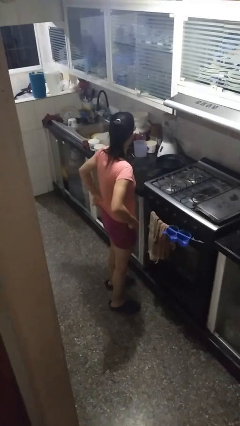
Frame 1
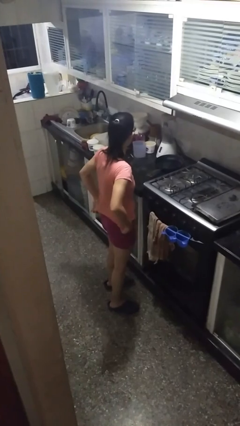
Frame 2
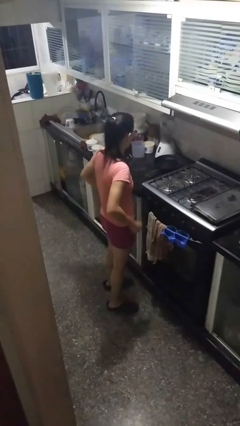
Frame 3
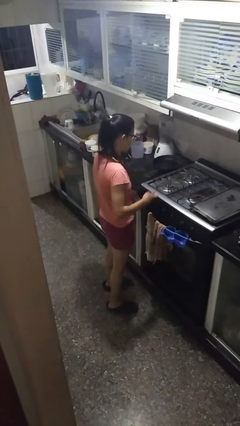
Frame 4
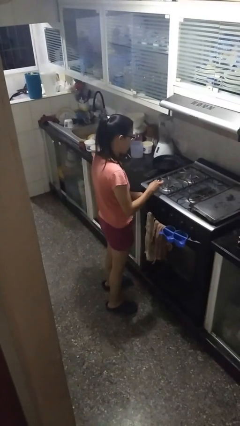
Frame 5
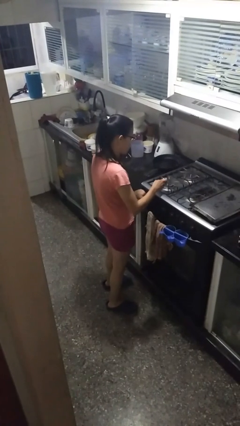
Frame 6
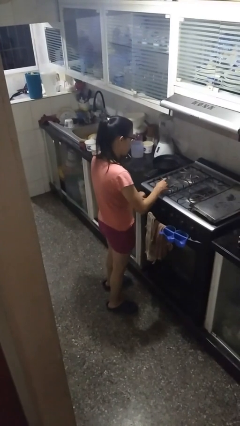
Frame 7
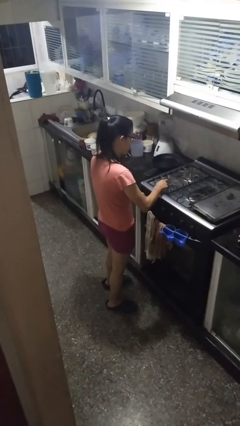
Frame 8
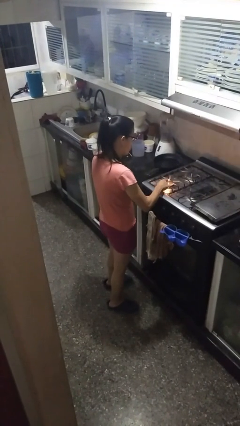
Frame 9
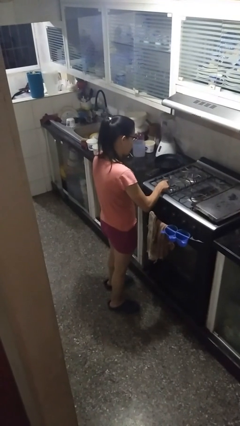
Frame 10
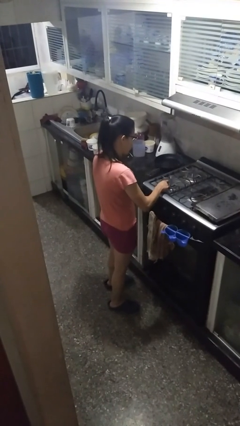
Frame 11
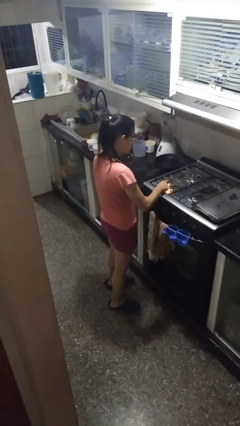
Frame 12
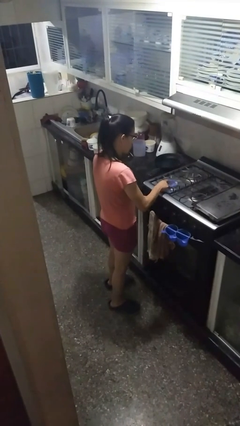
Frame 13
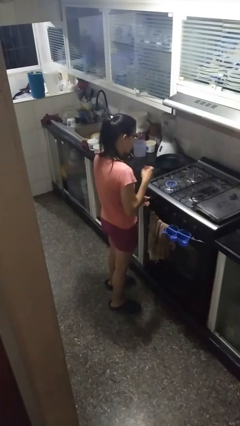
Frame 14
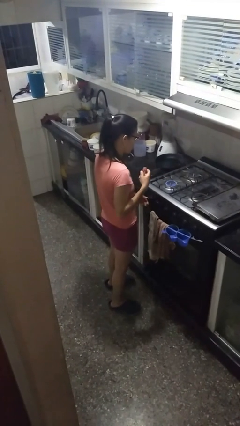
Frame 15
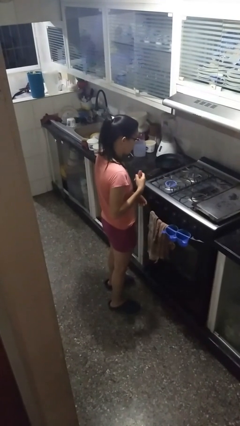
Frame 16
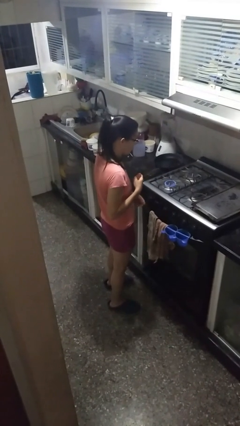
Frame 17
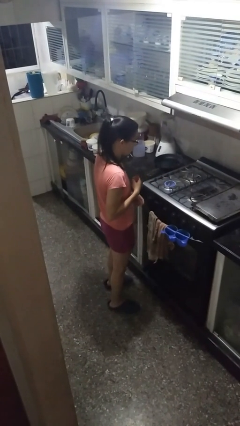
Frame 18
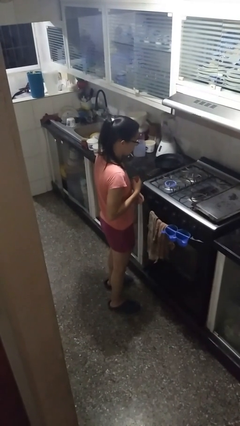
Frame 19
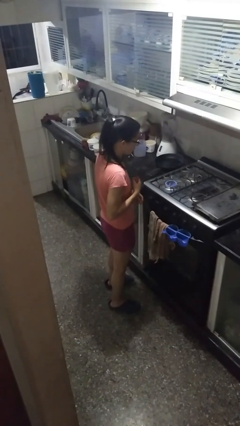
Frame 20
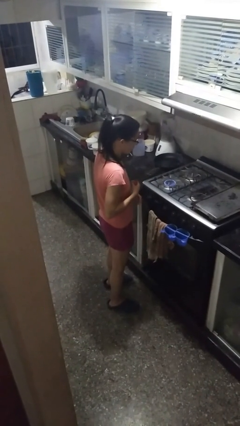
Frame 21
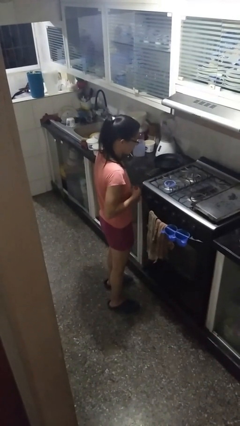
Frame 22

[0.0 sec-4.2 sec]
person turns on stovetop

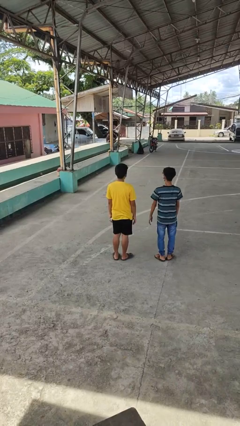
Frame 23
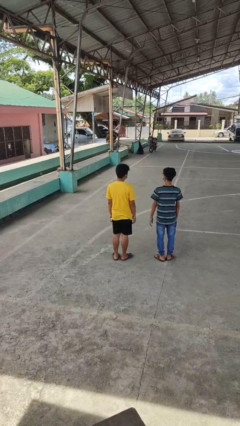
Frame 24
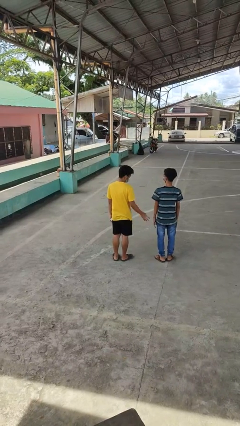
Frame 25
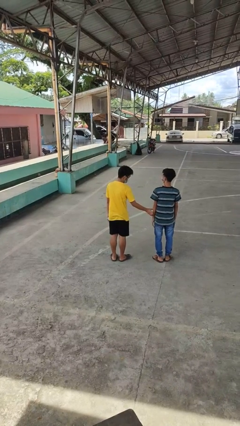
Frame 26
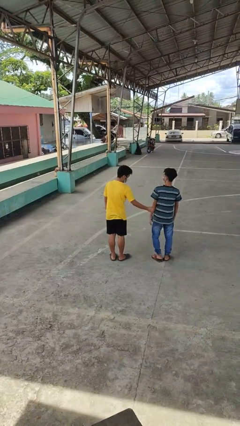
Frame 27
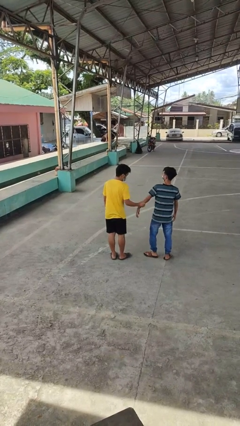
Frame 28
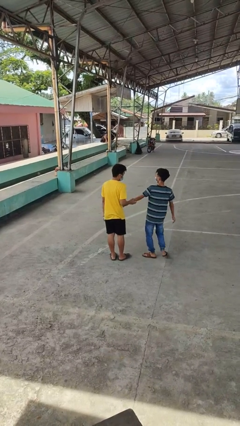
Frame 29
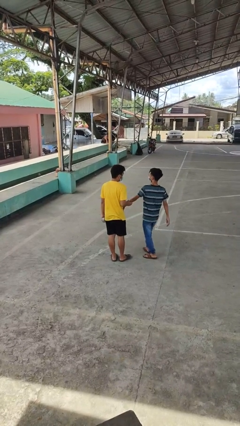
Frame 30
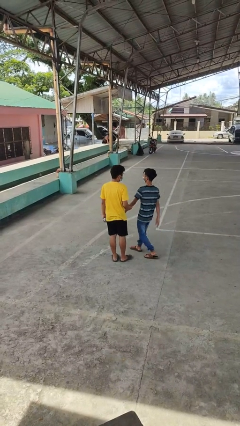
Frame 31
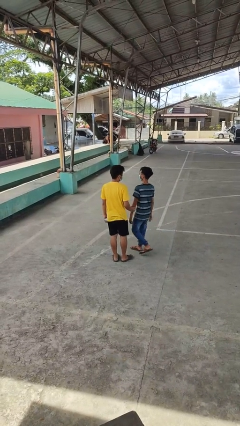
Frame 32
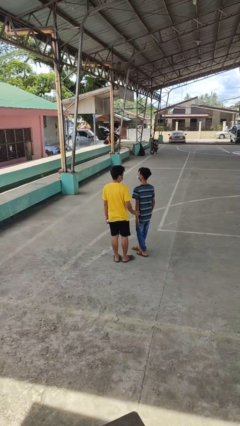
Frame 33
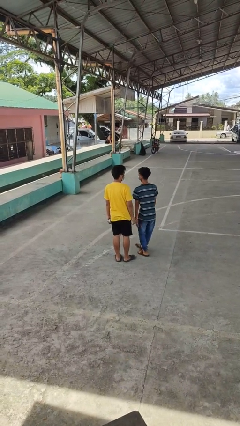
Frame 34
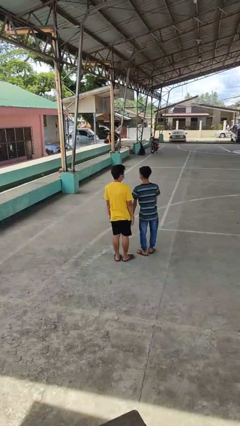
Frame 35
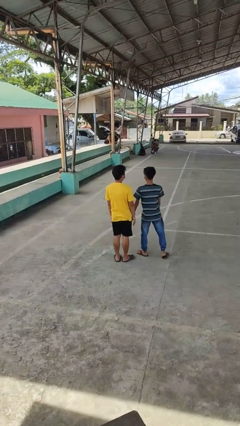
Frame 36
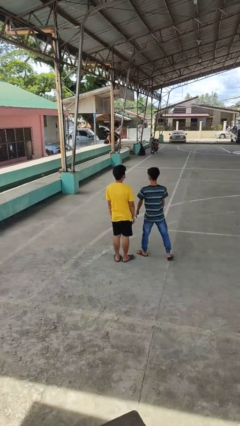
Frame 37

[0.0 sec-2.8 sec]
person grabs person by forearm

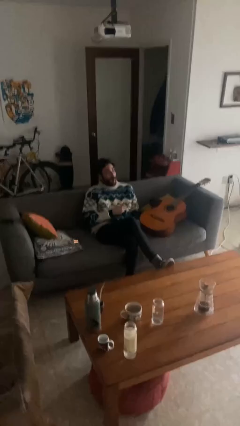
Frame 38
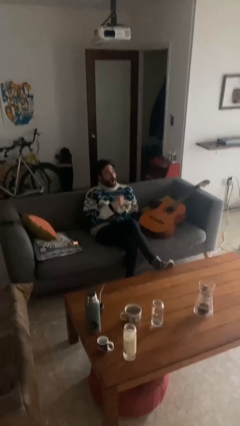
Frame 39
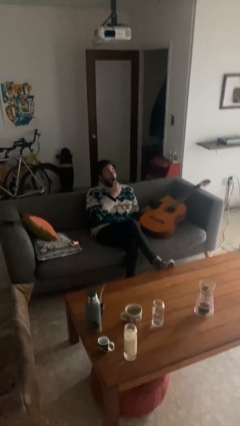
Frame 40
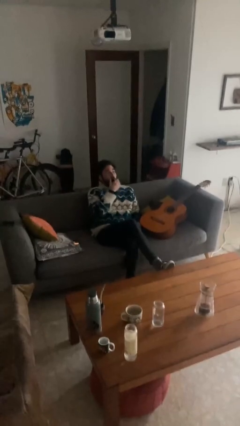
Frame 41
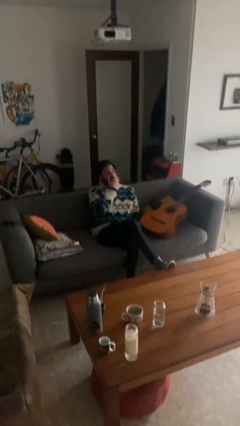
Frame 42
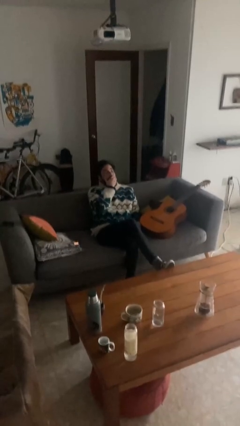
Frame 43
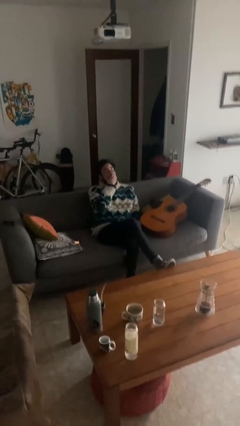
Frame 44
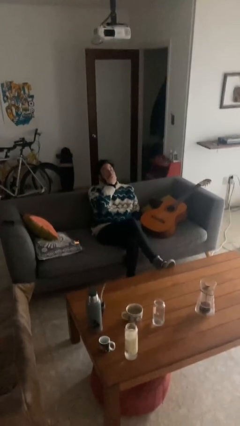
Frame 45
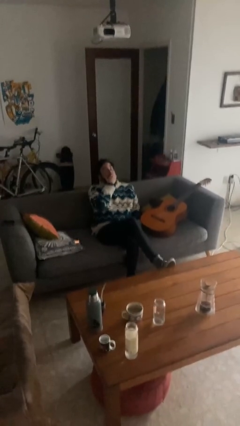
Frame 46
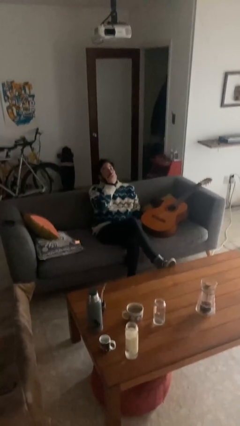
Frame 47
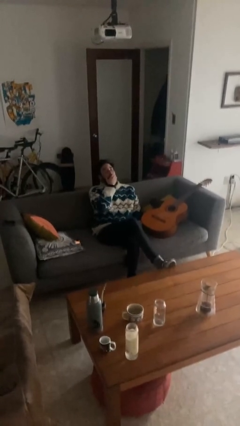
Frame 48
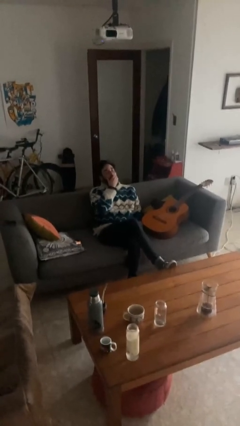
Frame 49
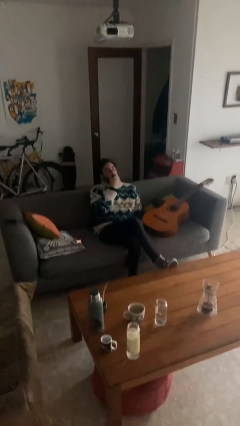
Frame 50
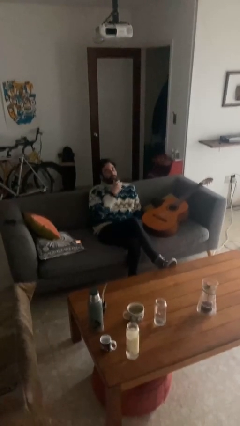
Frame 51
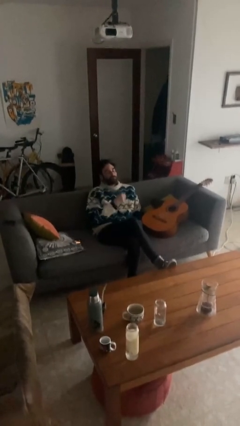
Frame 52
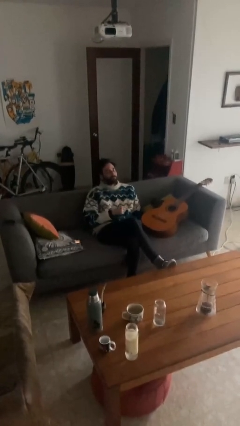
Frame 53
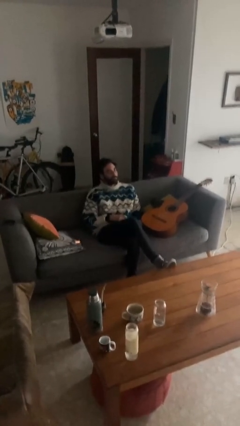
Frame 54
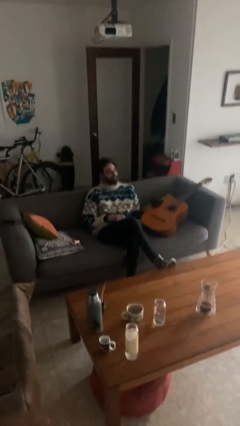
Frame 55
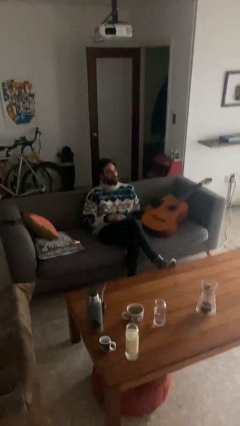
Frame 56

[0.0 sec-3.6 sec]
person yawns

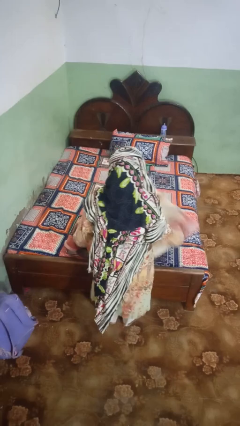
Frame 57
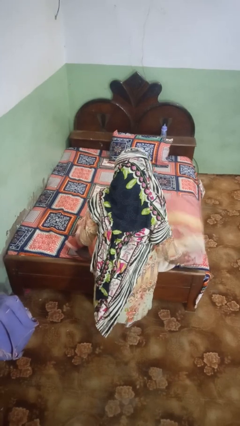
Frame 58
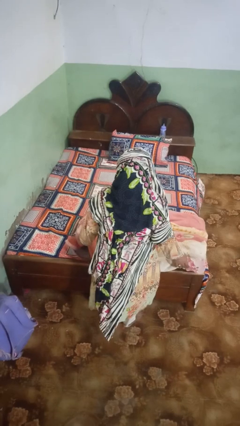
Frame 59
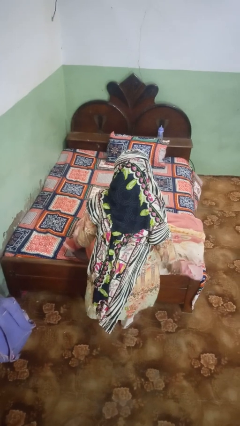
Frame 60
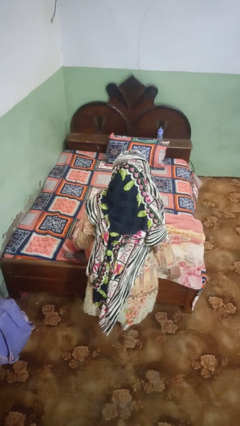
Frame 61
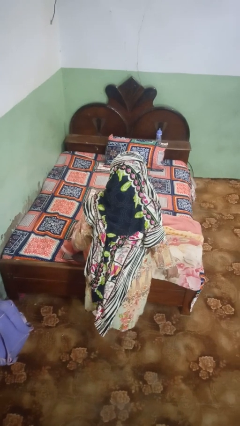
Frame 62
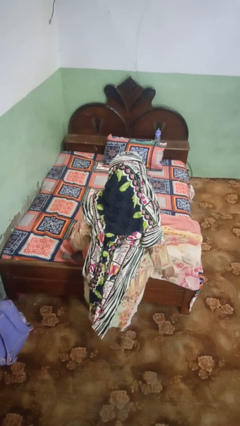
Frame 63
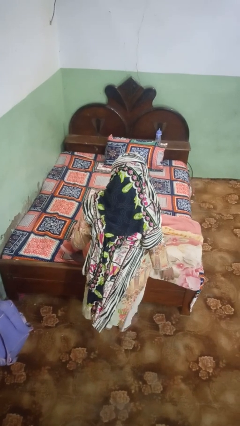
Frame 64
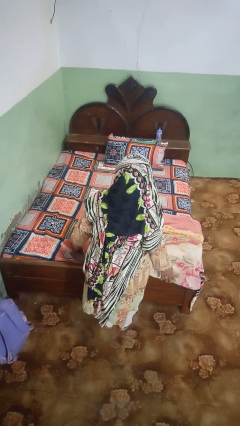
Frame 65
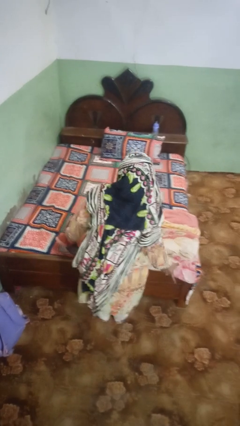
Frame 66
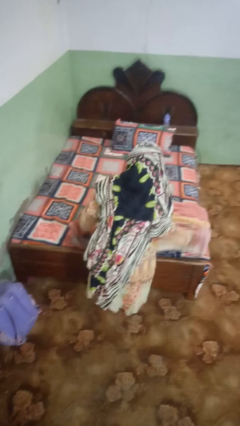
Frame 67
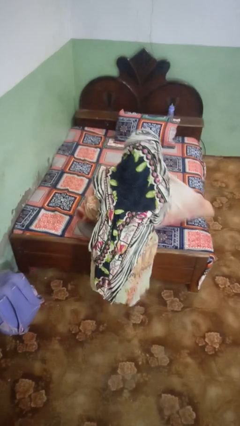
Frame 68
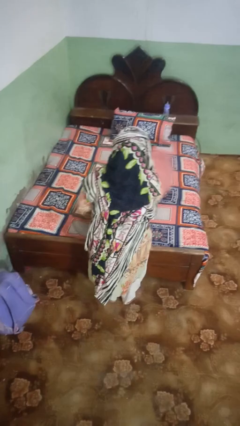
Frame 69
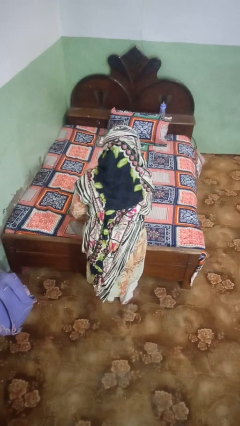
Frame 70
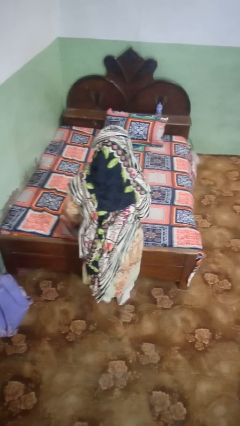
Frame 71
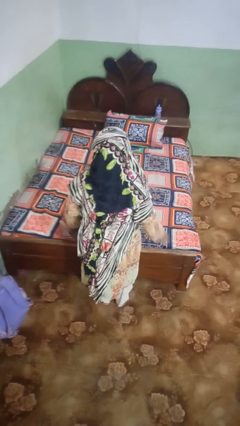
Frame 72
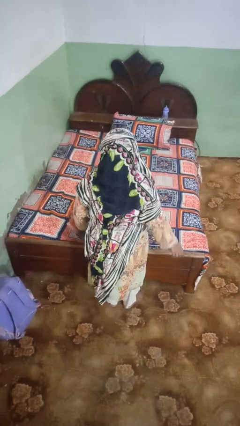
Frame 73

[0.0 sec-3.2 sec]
person folds blanket

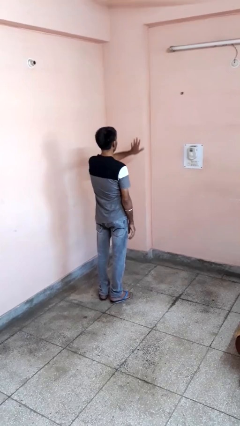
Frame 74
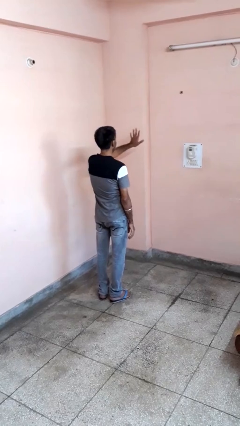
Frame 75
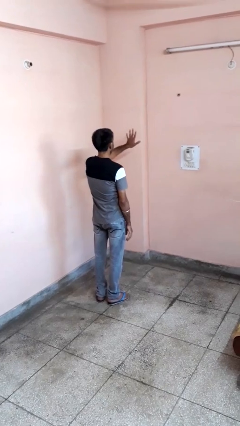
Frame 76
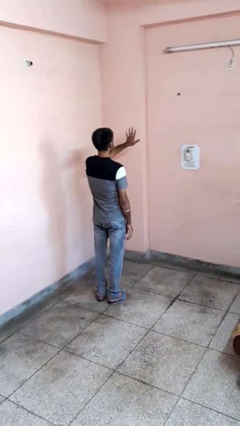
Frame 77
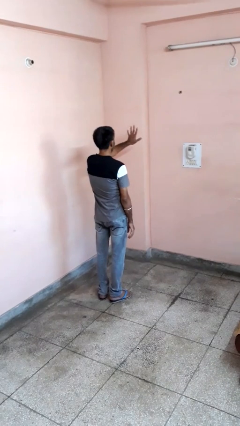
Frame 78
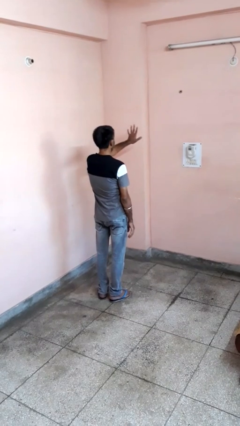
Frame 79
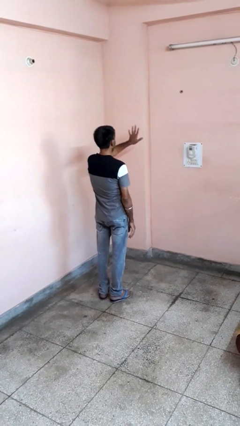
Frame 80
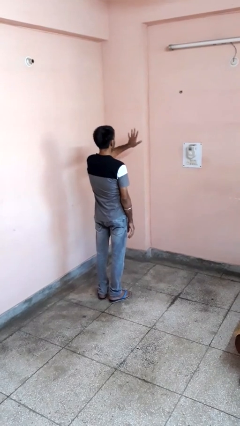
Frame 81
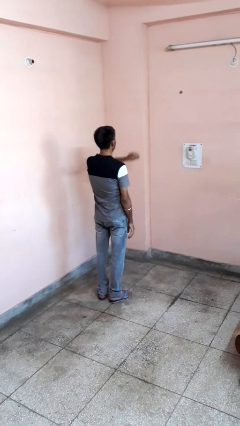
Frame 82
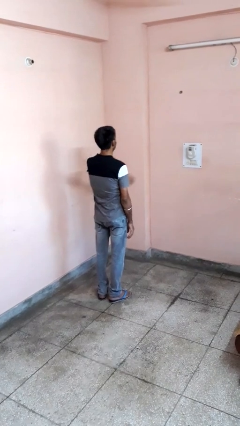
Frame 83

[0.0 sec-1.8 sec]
person gestures number five

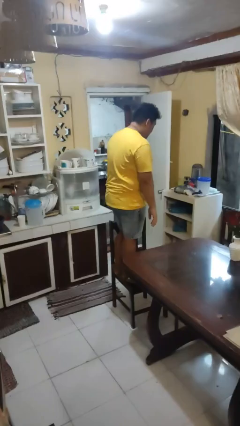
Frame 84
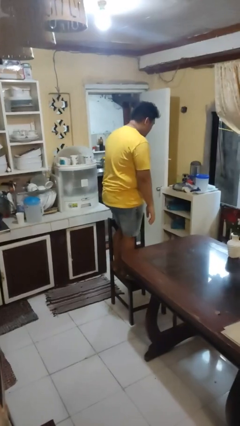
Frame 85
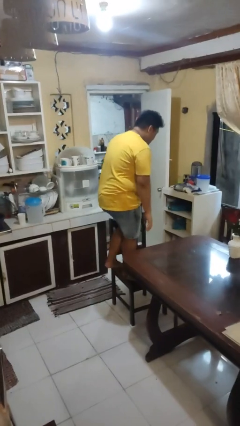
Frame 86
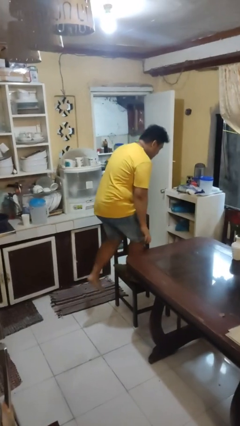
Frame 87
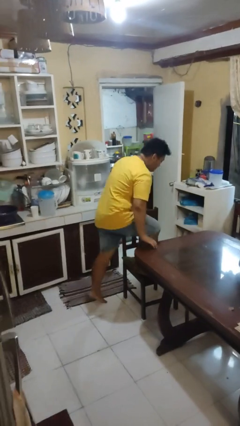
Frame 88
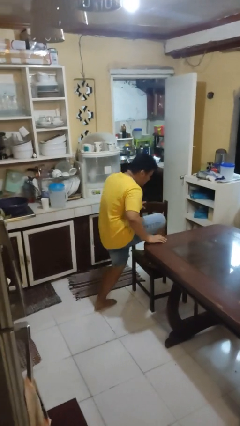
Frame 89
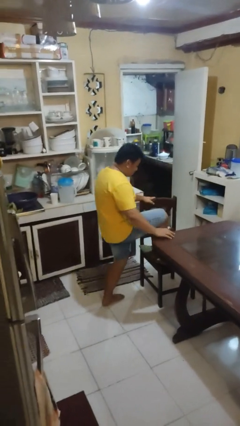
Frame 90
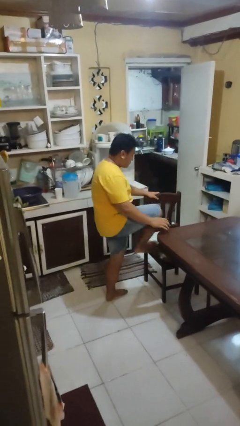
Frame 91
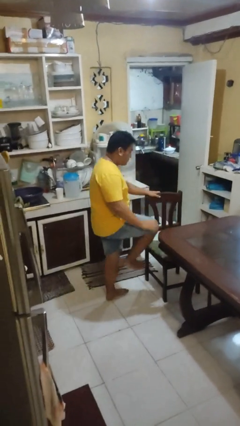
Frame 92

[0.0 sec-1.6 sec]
person climbs off chair

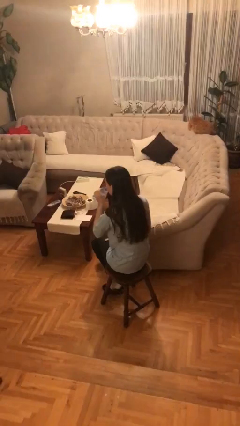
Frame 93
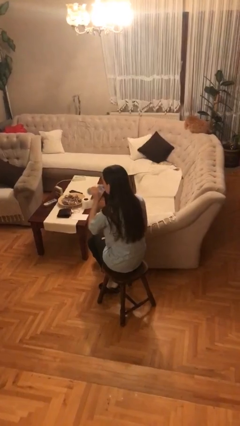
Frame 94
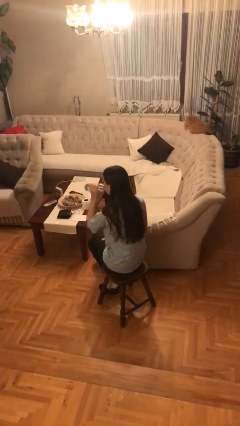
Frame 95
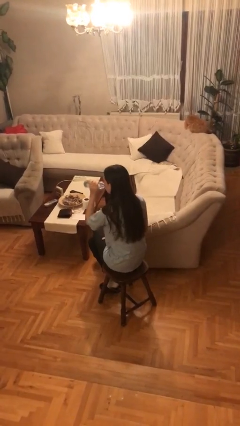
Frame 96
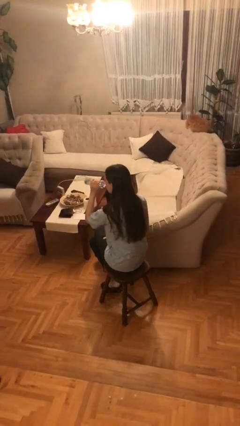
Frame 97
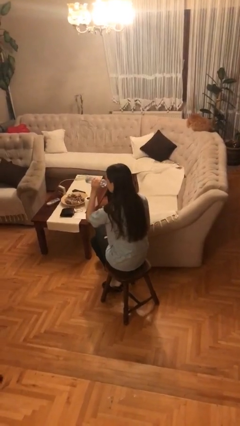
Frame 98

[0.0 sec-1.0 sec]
person drinks from bottle
